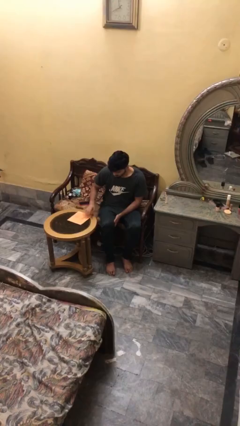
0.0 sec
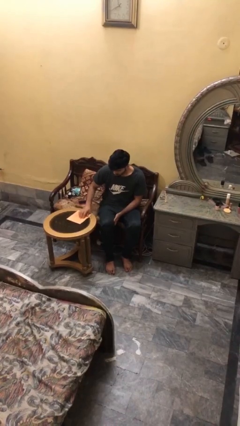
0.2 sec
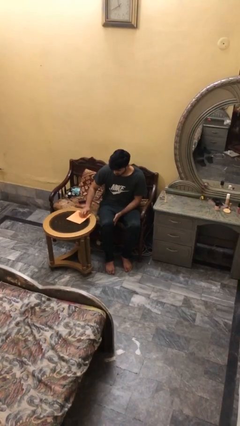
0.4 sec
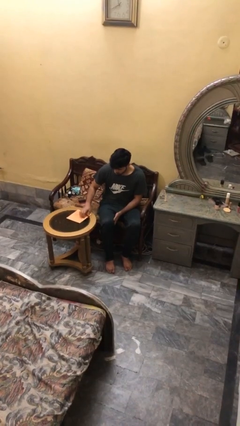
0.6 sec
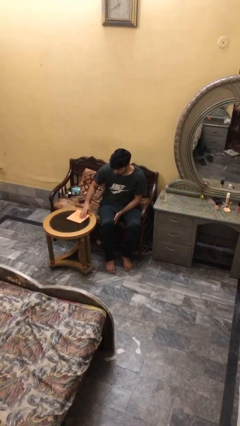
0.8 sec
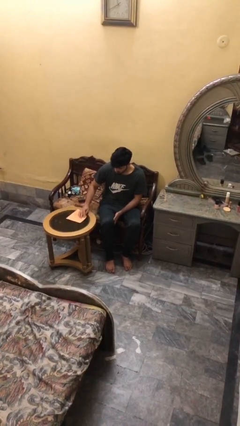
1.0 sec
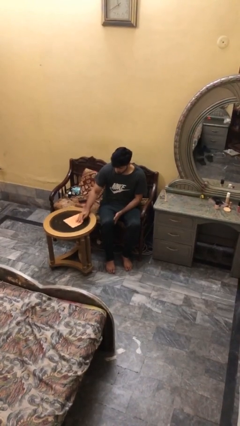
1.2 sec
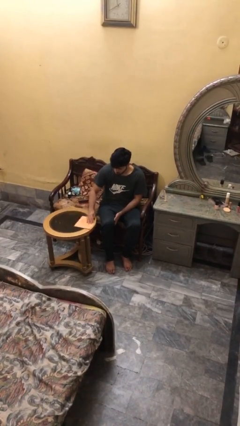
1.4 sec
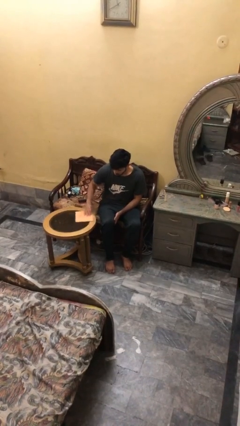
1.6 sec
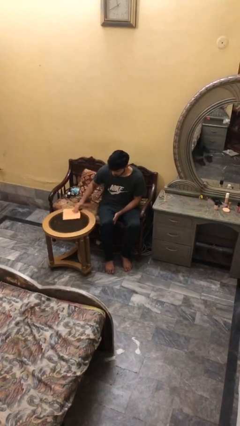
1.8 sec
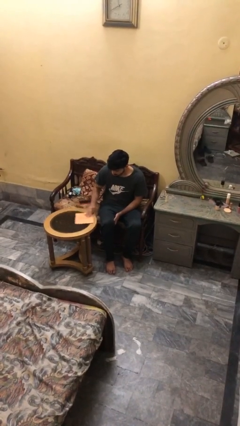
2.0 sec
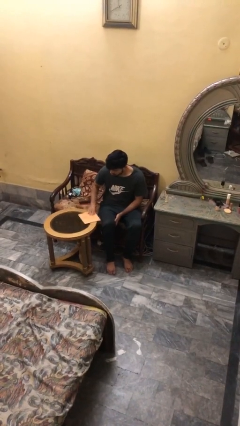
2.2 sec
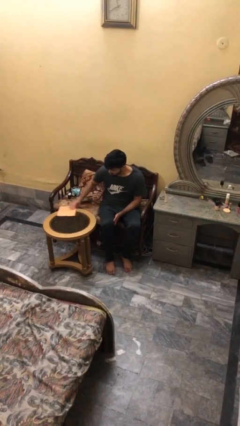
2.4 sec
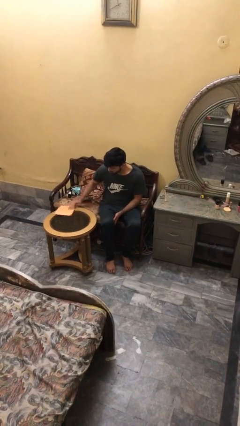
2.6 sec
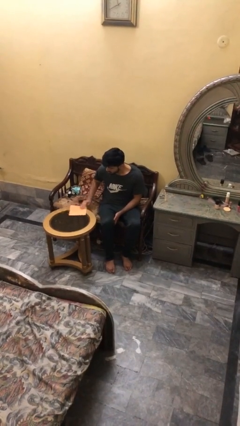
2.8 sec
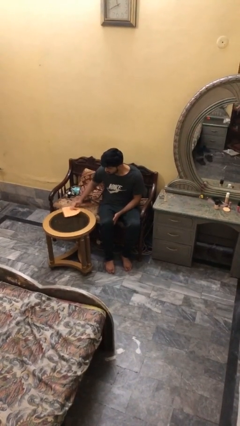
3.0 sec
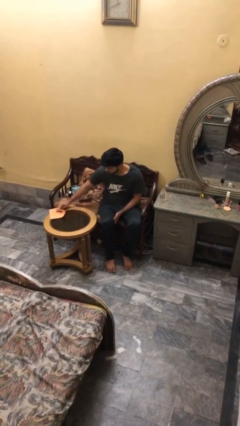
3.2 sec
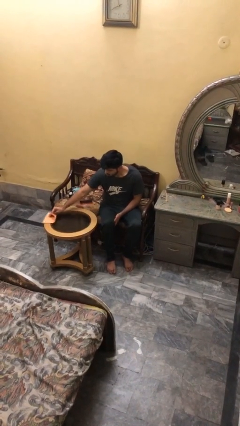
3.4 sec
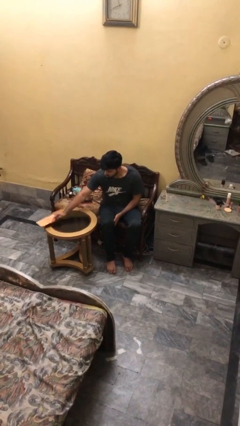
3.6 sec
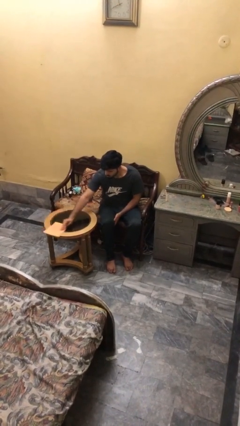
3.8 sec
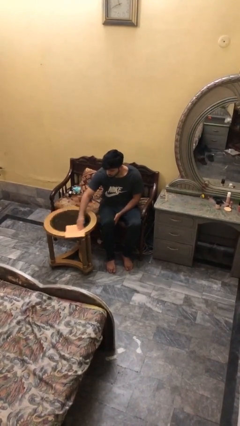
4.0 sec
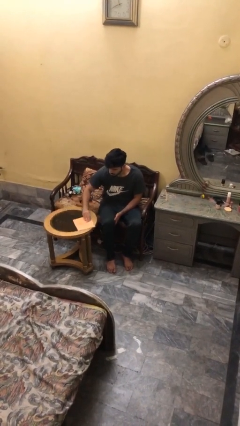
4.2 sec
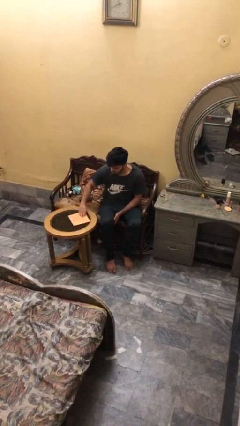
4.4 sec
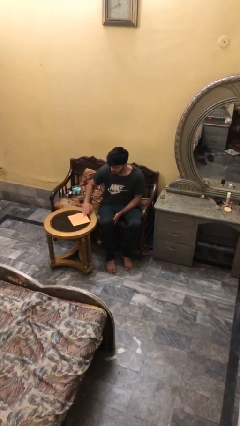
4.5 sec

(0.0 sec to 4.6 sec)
person cleans table with rag

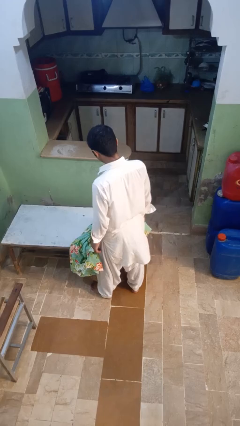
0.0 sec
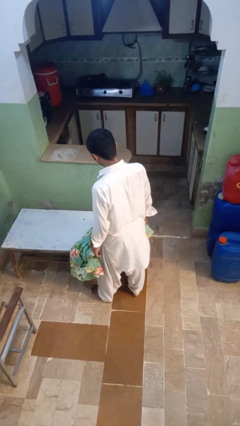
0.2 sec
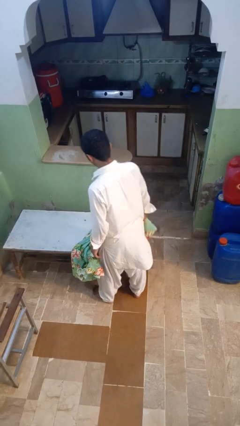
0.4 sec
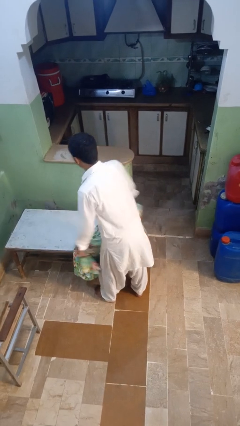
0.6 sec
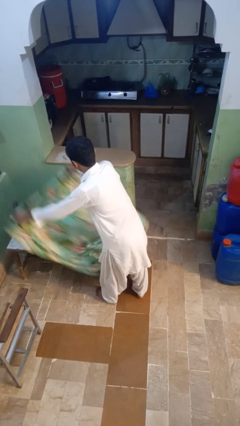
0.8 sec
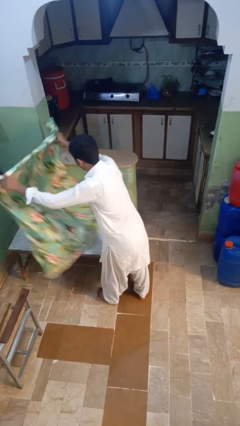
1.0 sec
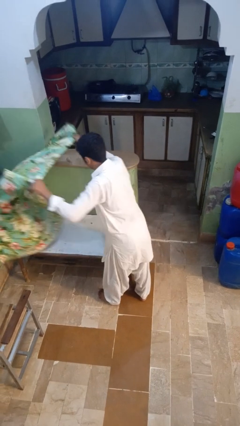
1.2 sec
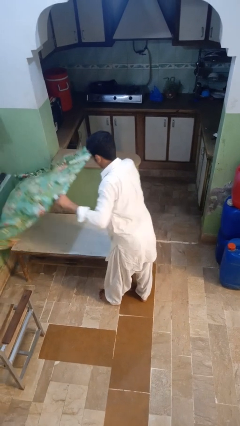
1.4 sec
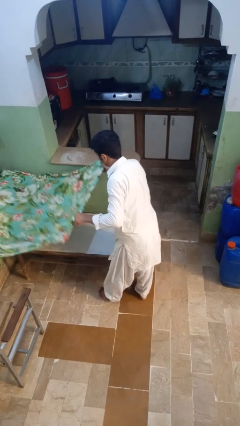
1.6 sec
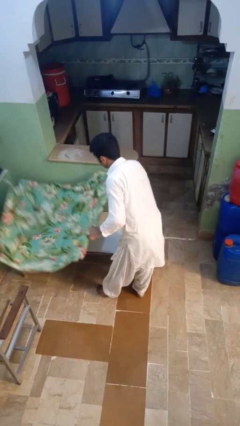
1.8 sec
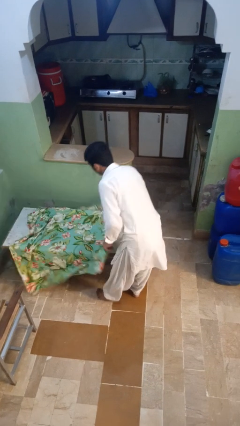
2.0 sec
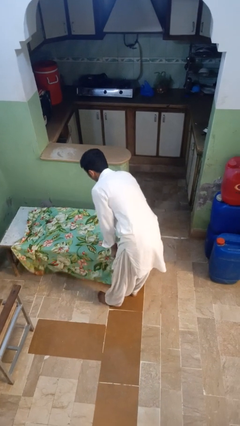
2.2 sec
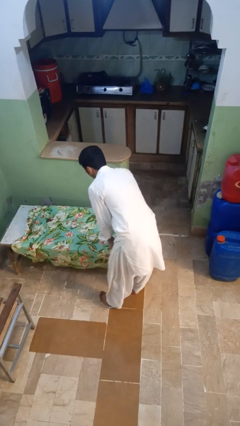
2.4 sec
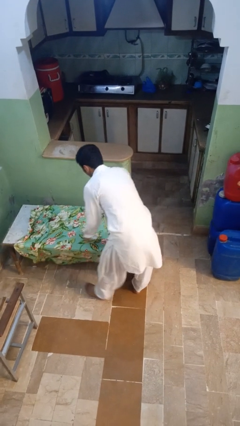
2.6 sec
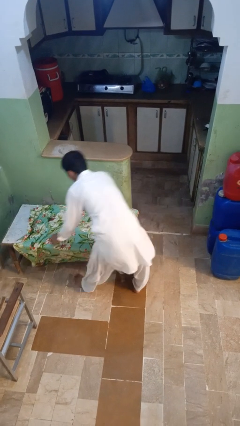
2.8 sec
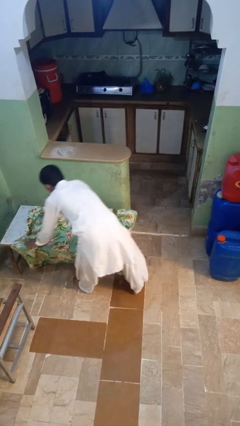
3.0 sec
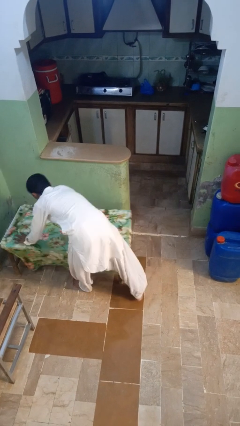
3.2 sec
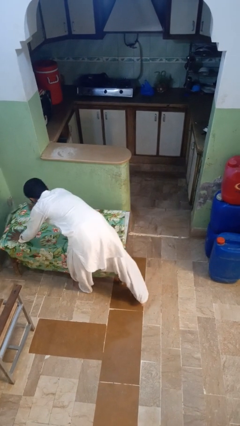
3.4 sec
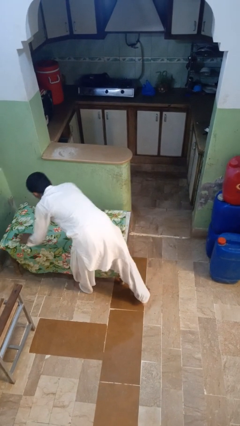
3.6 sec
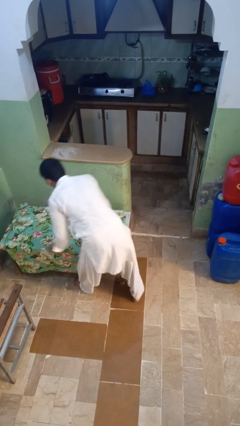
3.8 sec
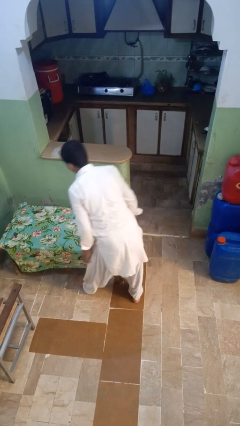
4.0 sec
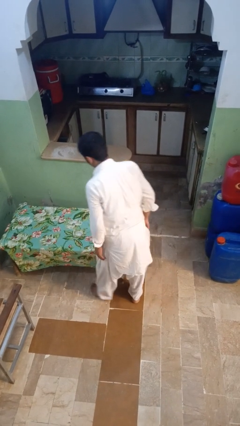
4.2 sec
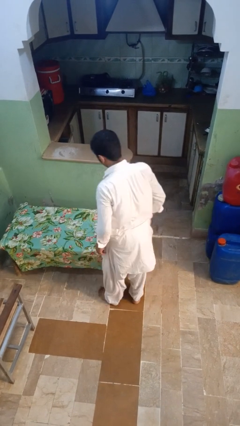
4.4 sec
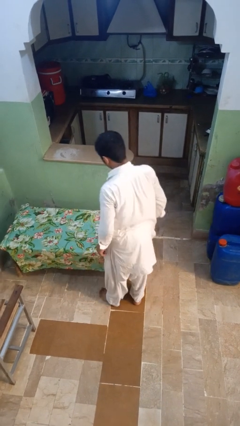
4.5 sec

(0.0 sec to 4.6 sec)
person spreads tablecloth

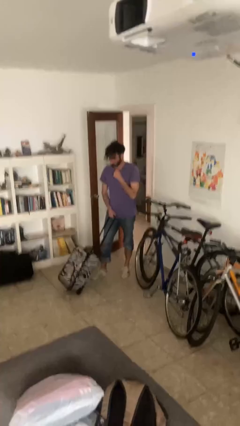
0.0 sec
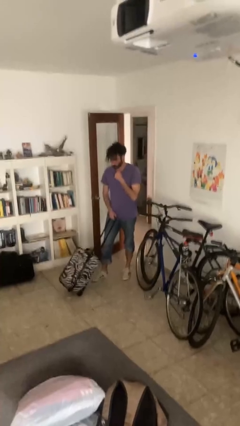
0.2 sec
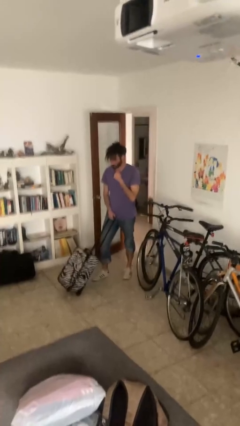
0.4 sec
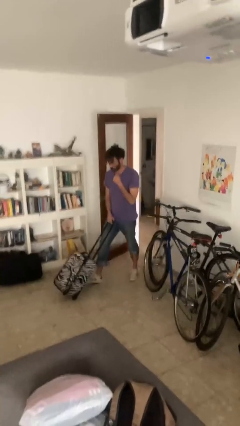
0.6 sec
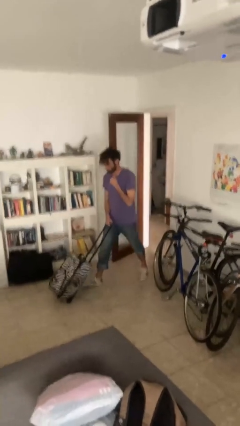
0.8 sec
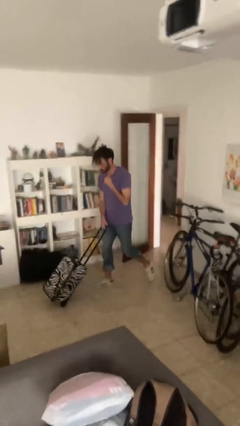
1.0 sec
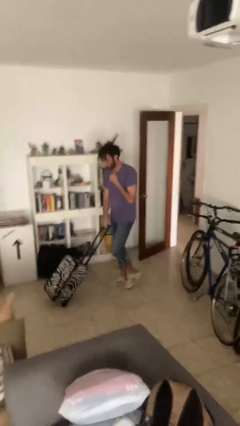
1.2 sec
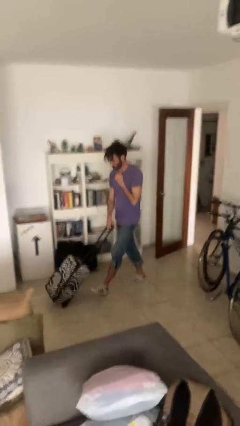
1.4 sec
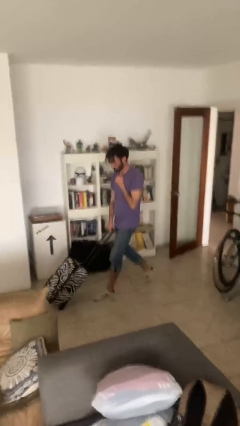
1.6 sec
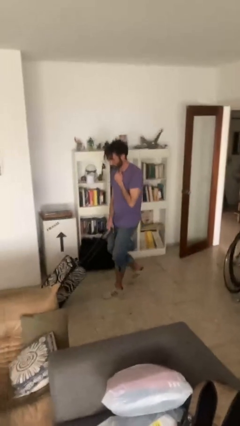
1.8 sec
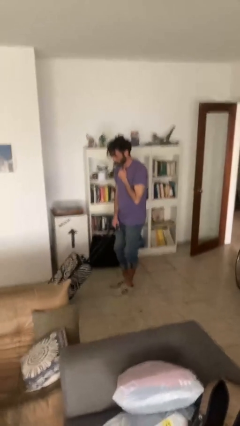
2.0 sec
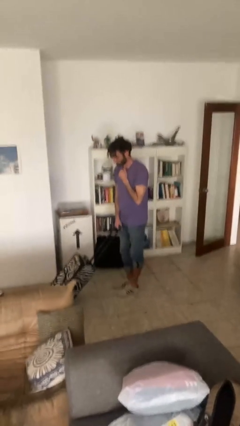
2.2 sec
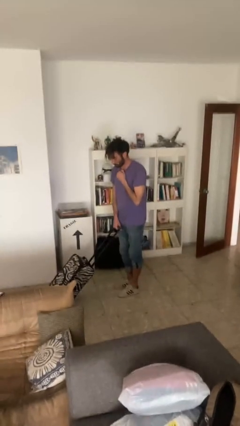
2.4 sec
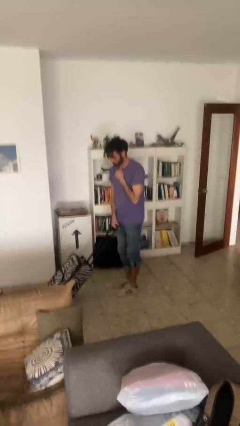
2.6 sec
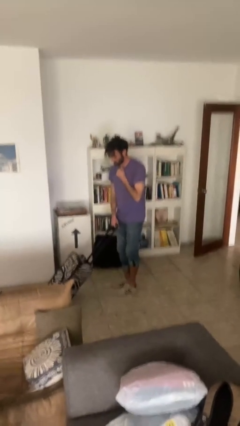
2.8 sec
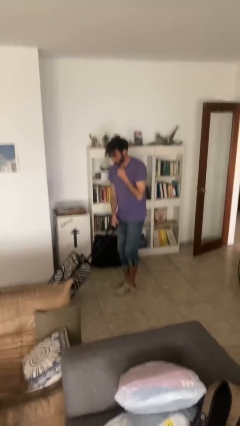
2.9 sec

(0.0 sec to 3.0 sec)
person pushes wheeled cart

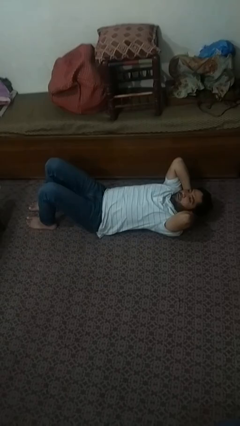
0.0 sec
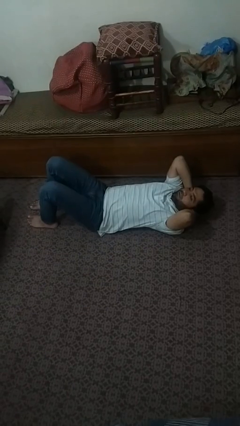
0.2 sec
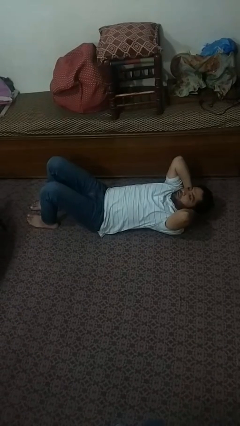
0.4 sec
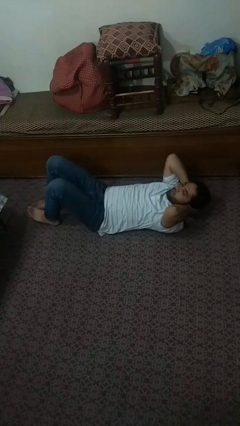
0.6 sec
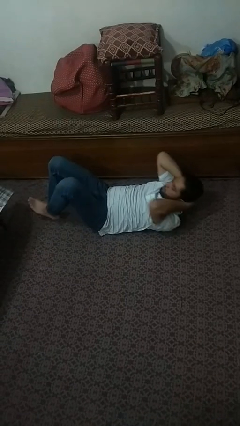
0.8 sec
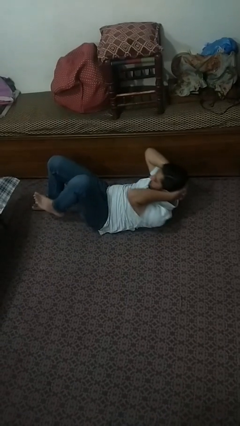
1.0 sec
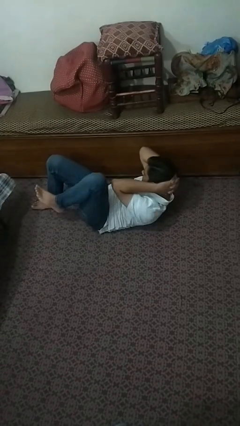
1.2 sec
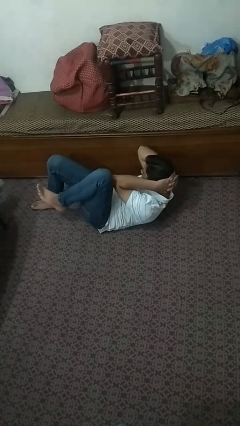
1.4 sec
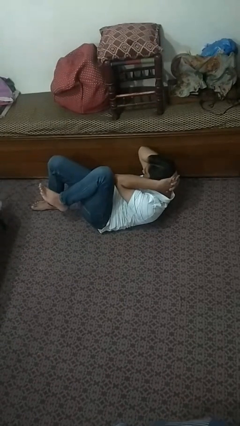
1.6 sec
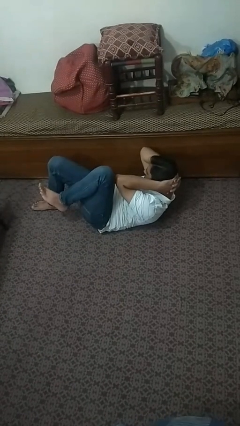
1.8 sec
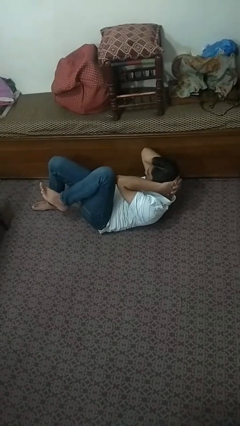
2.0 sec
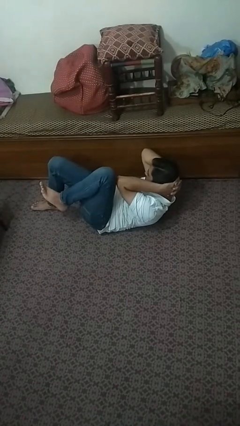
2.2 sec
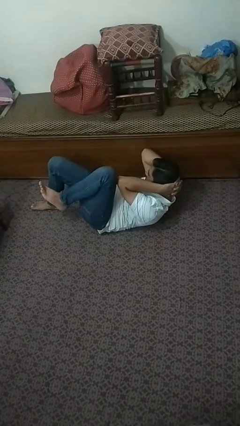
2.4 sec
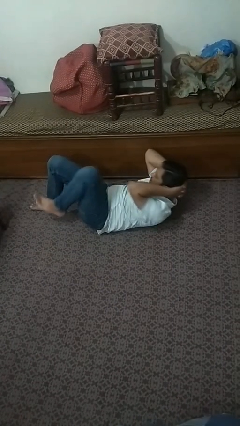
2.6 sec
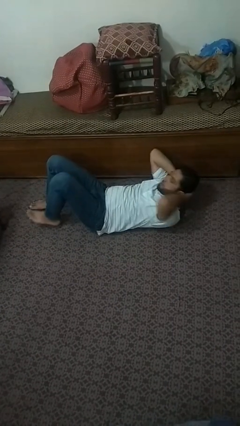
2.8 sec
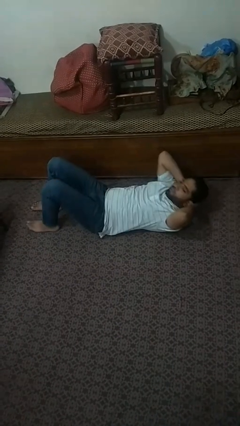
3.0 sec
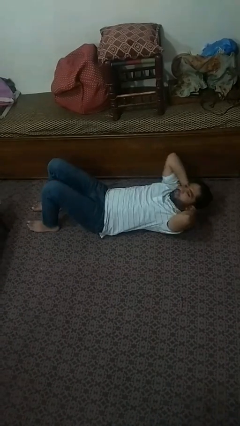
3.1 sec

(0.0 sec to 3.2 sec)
person exercises with situp

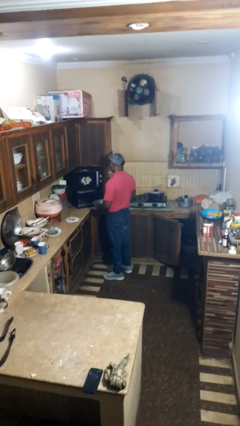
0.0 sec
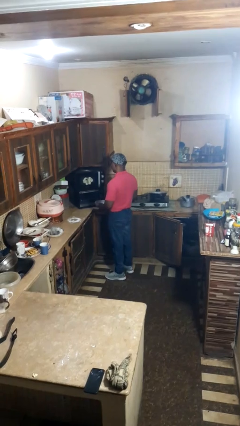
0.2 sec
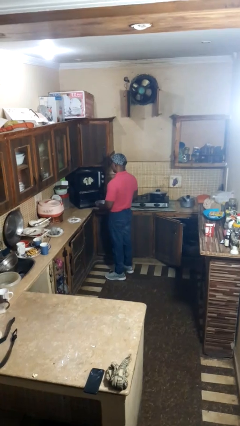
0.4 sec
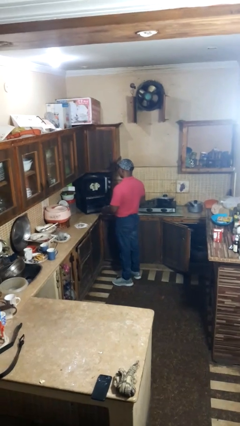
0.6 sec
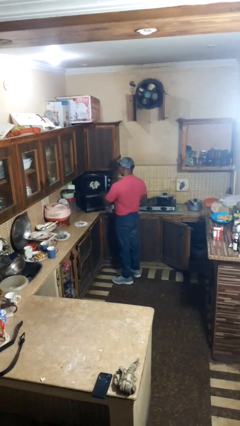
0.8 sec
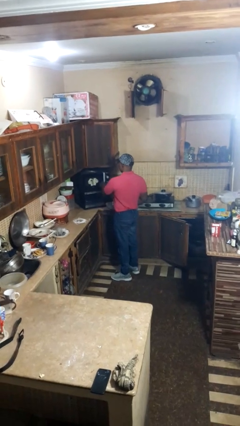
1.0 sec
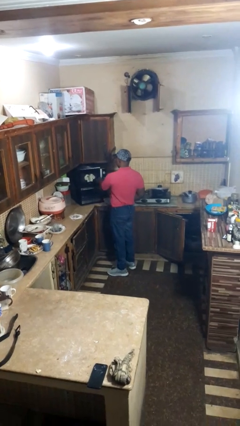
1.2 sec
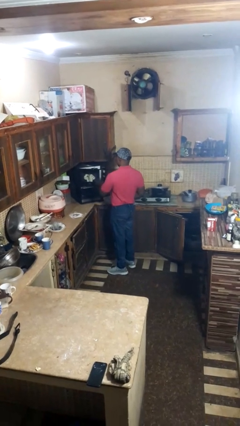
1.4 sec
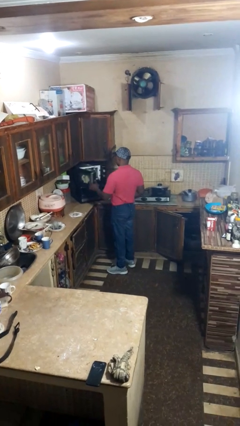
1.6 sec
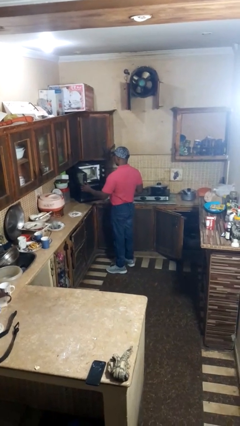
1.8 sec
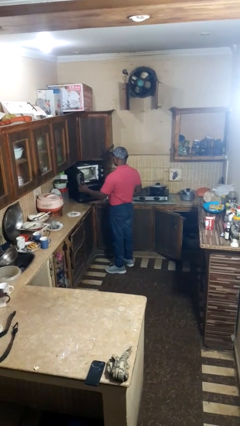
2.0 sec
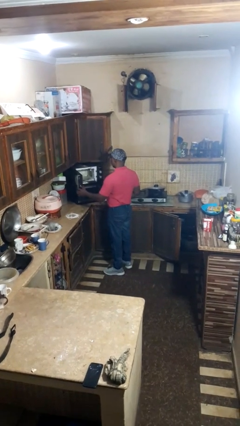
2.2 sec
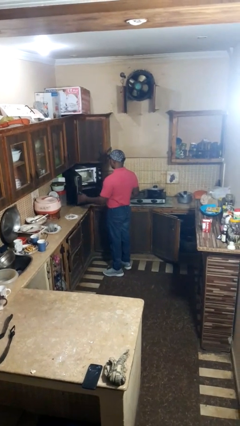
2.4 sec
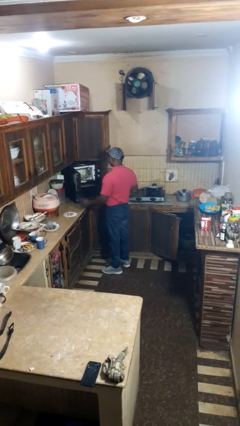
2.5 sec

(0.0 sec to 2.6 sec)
person opens microwave

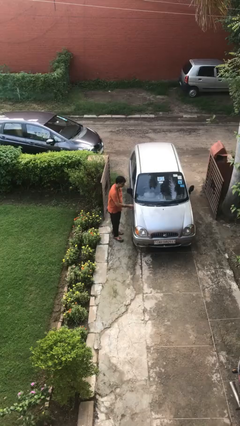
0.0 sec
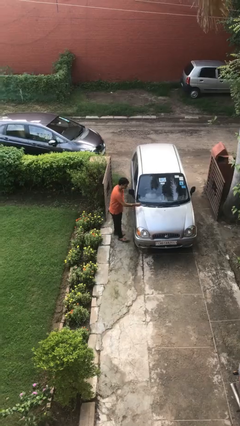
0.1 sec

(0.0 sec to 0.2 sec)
person flips down car wipers
